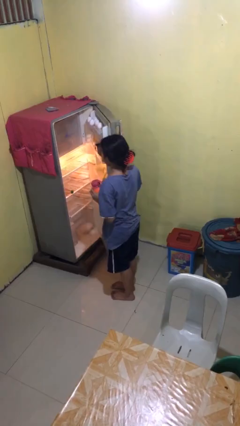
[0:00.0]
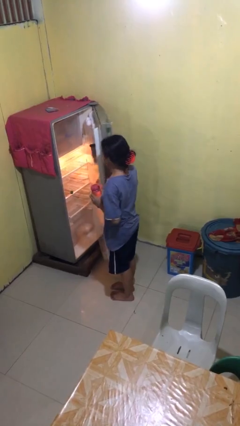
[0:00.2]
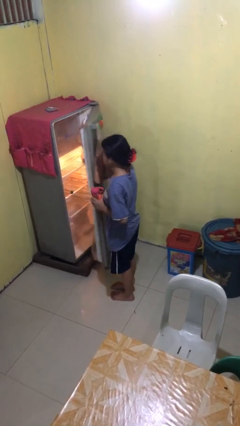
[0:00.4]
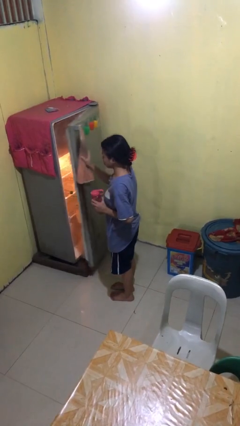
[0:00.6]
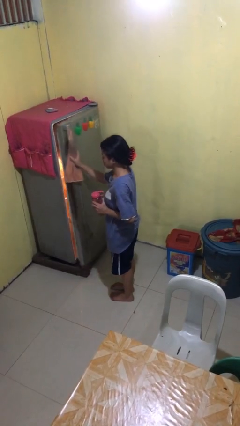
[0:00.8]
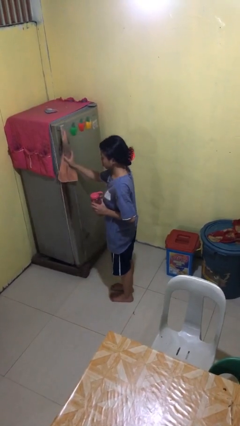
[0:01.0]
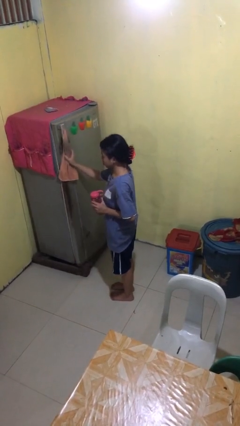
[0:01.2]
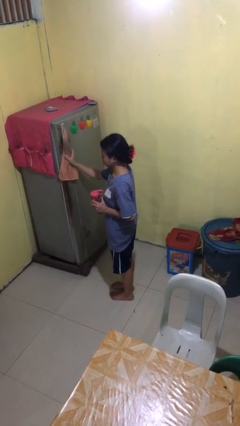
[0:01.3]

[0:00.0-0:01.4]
person closes refrigerator

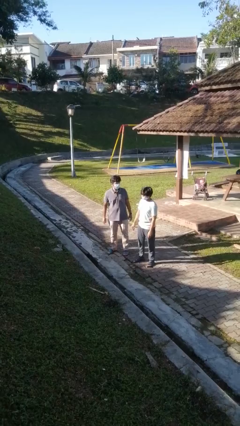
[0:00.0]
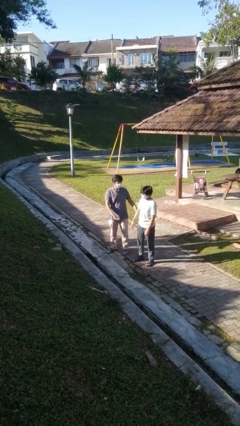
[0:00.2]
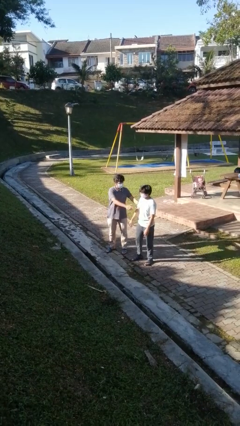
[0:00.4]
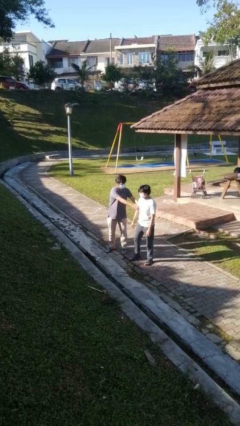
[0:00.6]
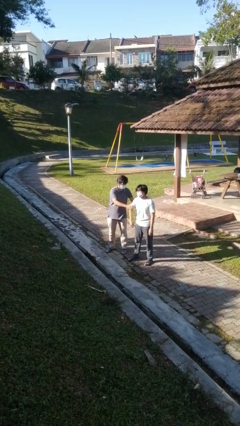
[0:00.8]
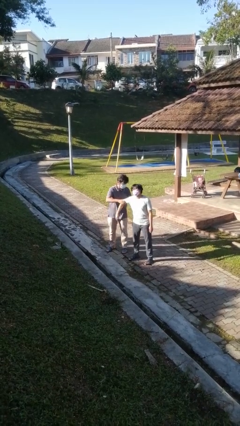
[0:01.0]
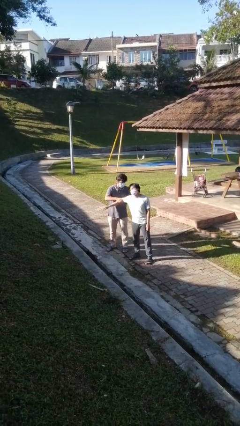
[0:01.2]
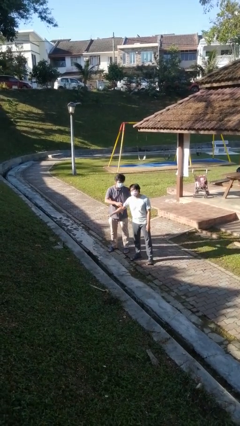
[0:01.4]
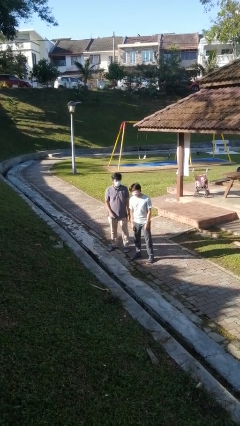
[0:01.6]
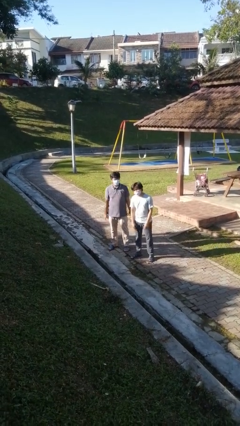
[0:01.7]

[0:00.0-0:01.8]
person grabs person by bicep

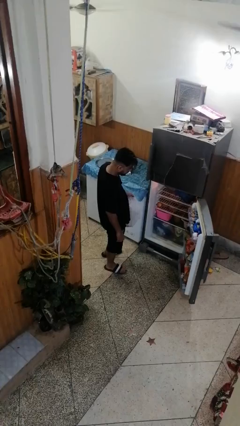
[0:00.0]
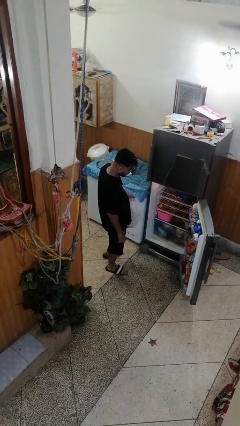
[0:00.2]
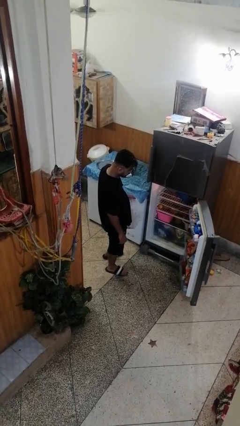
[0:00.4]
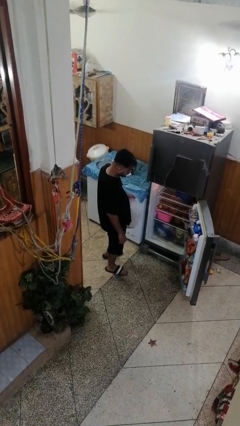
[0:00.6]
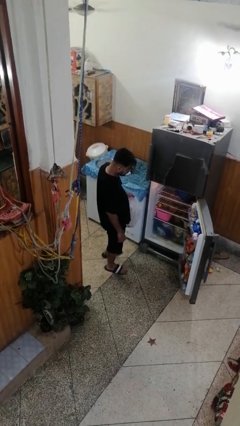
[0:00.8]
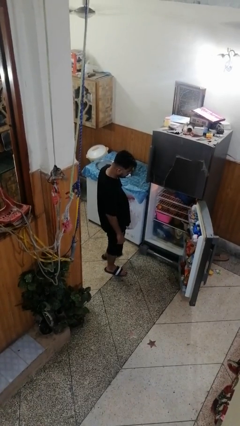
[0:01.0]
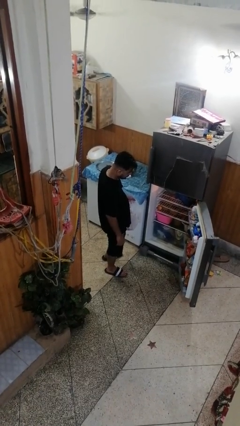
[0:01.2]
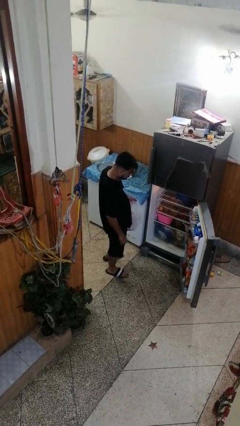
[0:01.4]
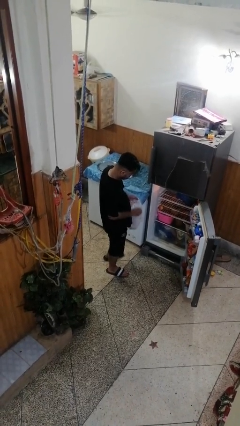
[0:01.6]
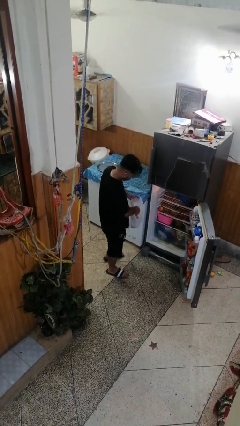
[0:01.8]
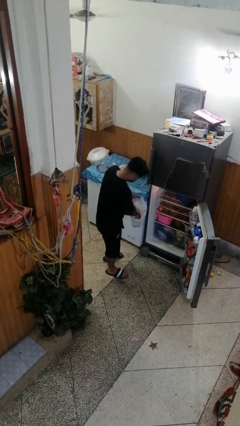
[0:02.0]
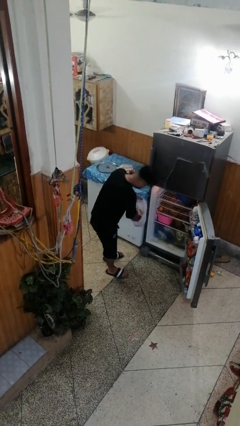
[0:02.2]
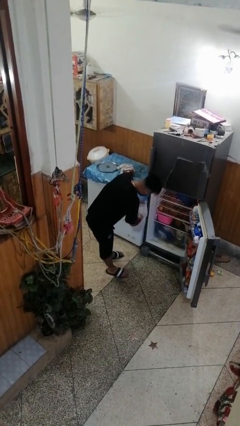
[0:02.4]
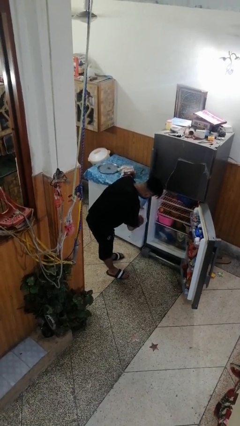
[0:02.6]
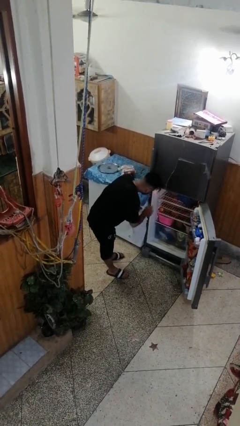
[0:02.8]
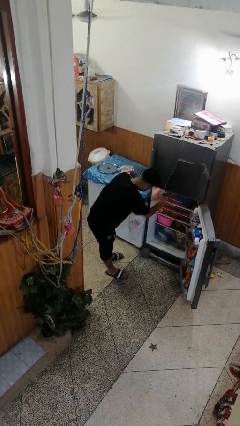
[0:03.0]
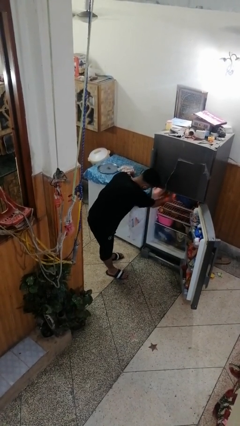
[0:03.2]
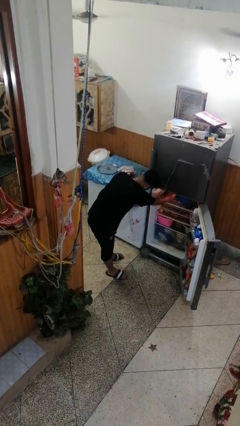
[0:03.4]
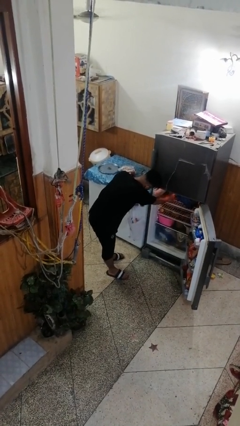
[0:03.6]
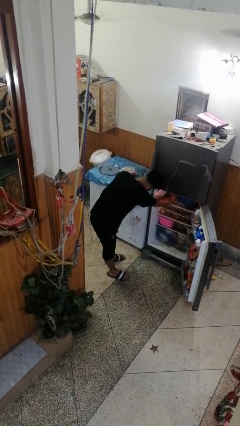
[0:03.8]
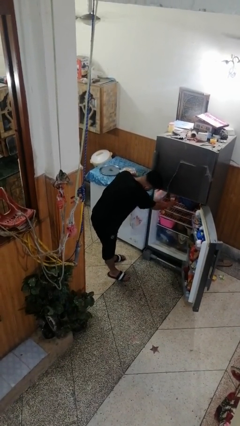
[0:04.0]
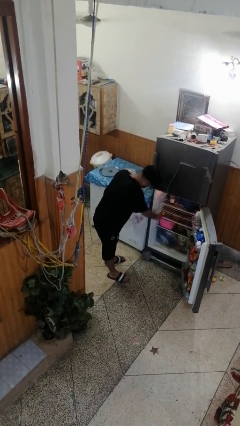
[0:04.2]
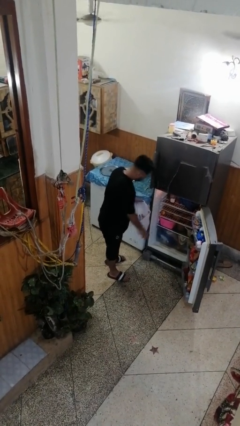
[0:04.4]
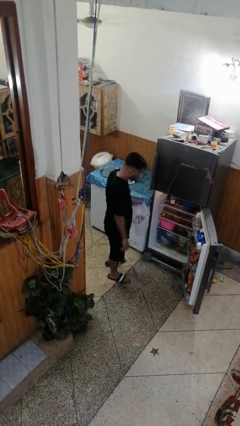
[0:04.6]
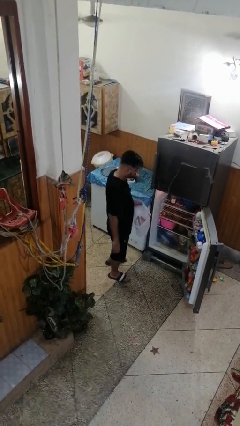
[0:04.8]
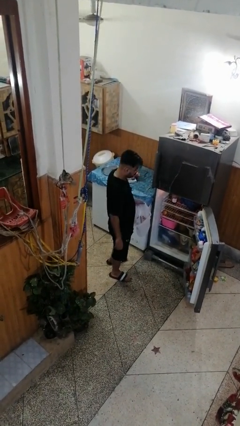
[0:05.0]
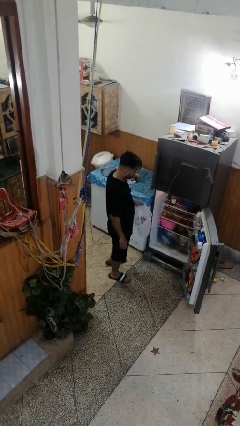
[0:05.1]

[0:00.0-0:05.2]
person loads groceries into refrigerator

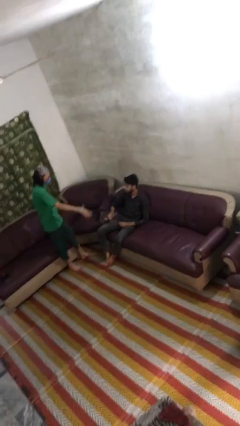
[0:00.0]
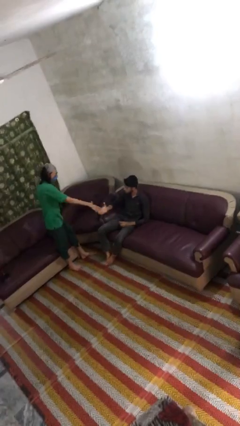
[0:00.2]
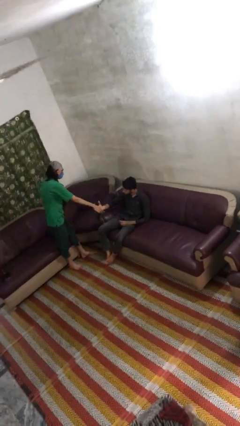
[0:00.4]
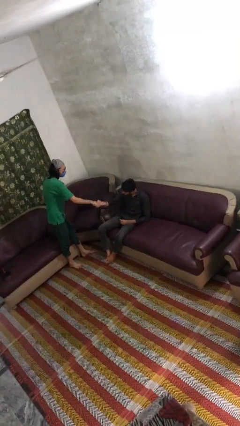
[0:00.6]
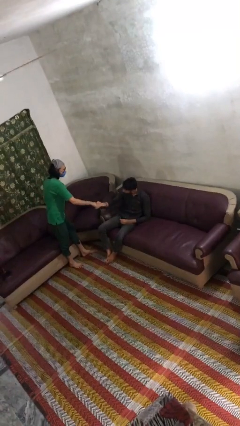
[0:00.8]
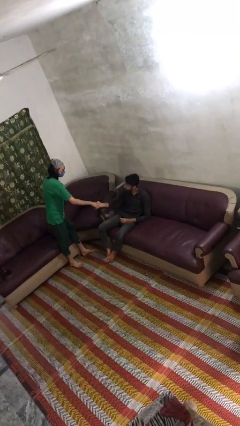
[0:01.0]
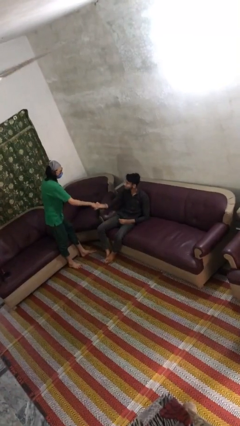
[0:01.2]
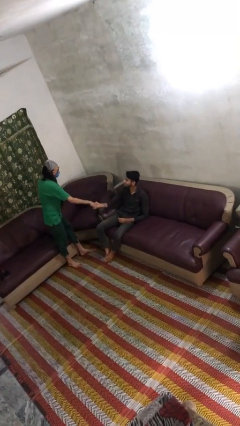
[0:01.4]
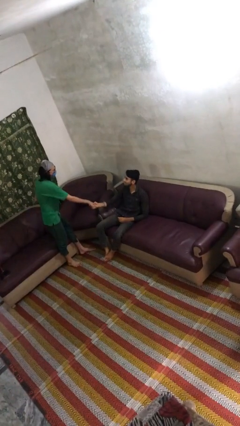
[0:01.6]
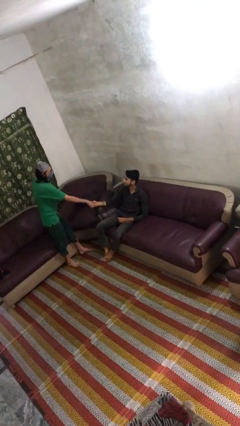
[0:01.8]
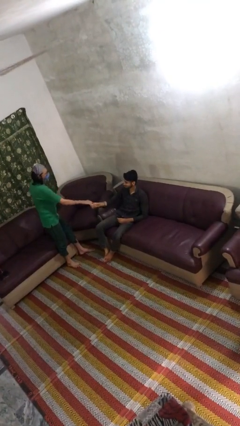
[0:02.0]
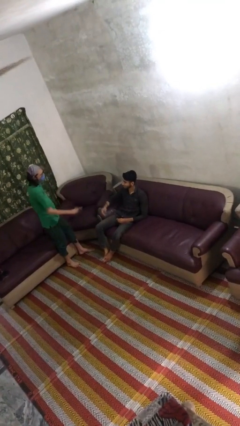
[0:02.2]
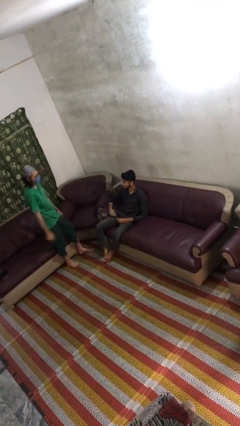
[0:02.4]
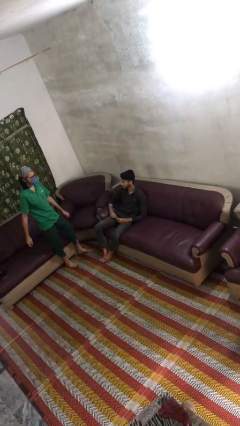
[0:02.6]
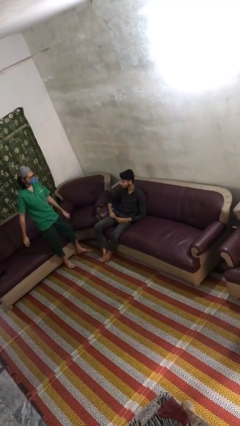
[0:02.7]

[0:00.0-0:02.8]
person shakes hand

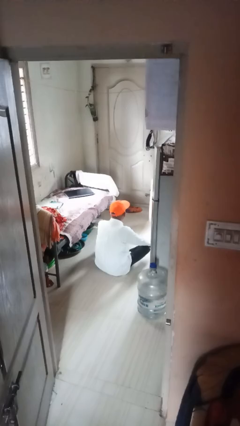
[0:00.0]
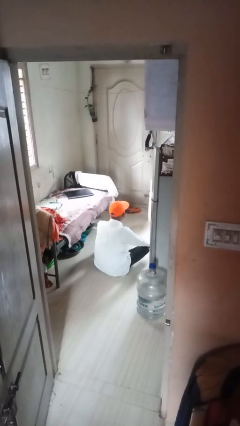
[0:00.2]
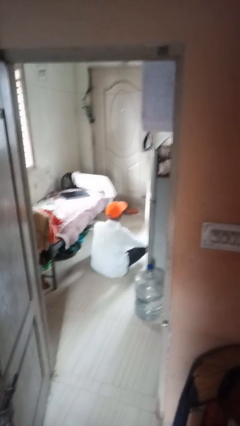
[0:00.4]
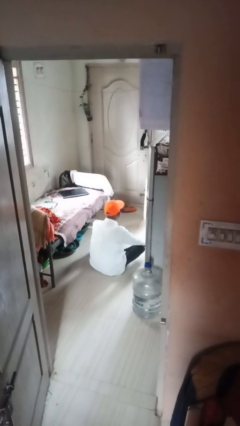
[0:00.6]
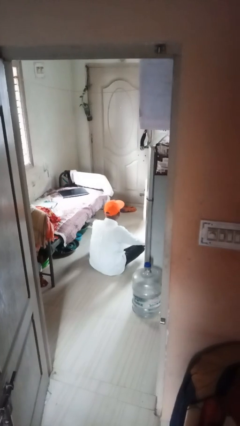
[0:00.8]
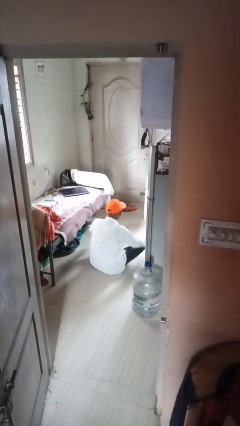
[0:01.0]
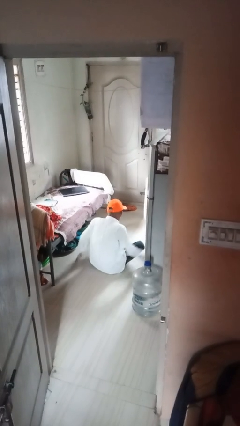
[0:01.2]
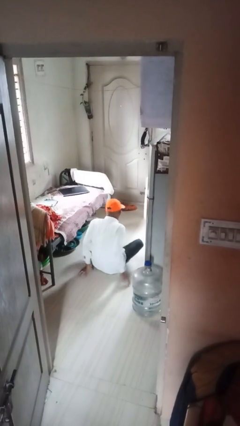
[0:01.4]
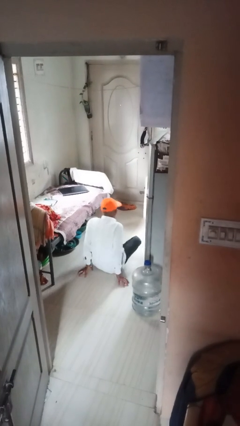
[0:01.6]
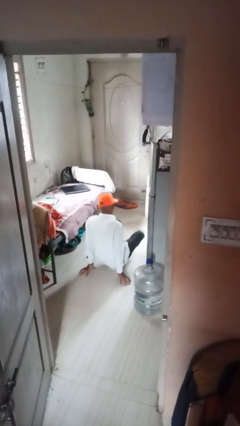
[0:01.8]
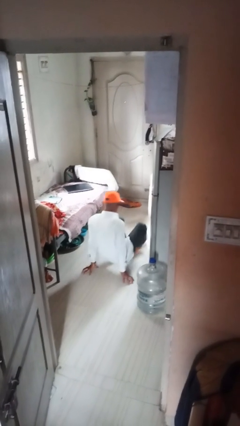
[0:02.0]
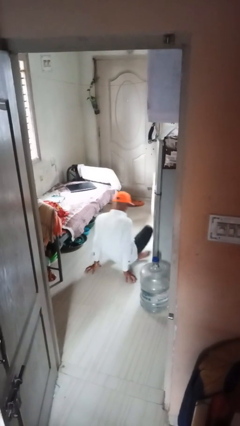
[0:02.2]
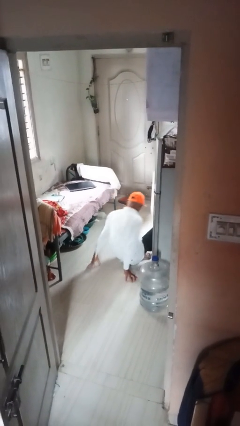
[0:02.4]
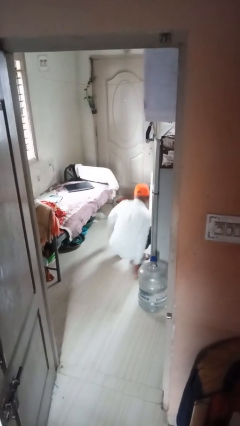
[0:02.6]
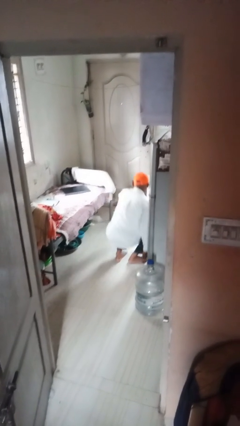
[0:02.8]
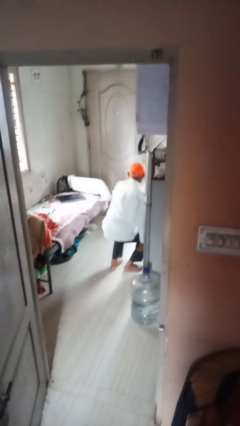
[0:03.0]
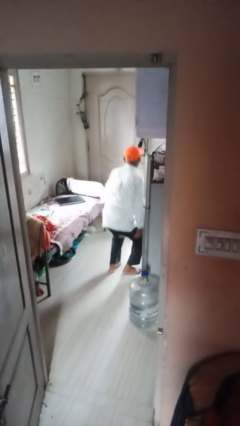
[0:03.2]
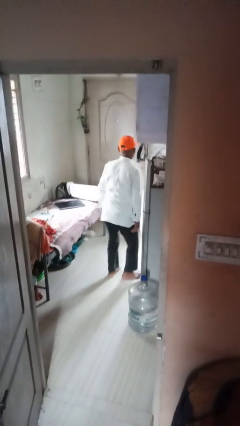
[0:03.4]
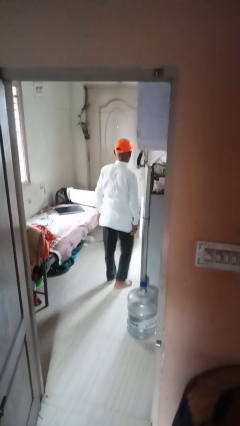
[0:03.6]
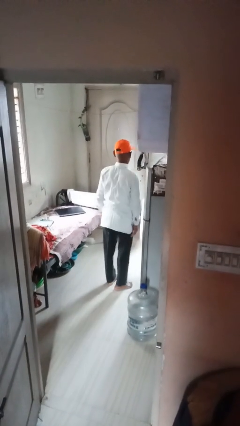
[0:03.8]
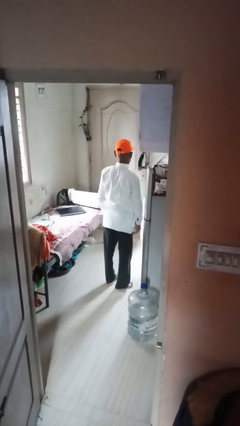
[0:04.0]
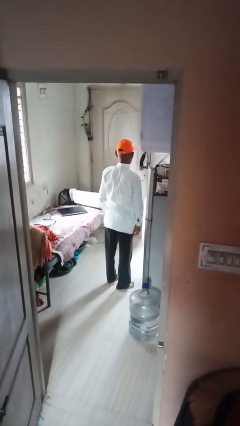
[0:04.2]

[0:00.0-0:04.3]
person stands up from floor

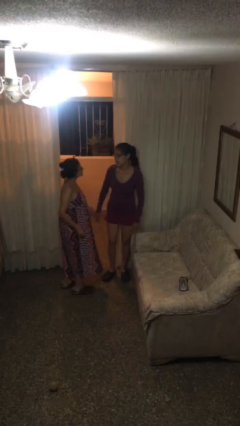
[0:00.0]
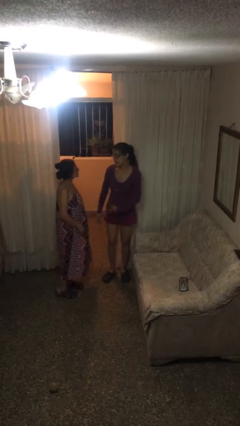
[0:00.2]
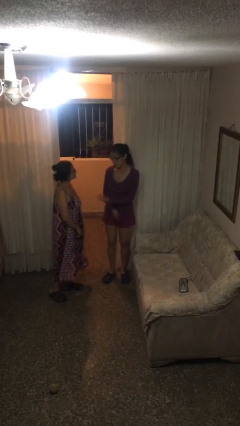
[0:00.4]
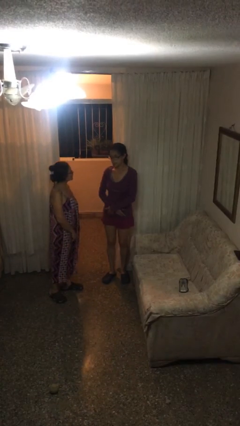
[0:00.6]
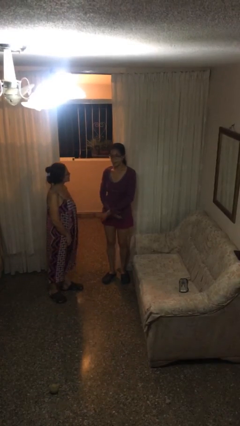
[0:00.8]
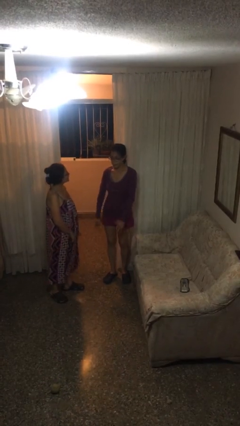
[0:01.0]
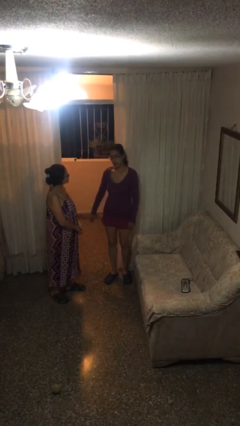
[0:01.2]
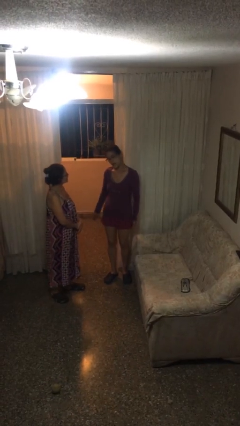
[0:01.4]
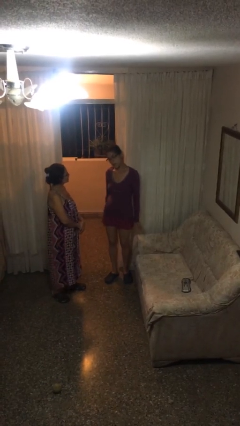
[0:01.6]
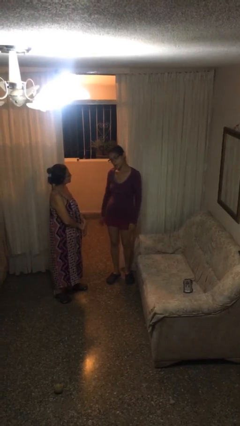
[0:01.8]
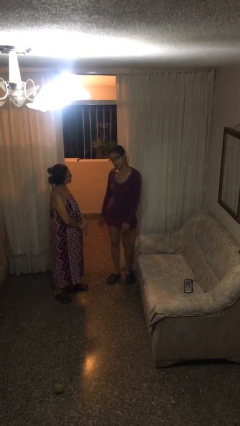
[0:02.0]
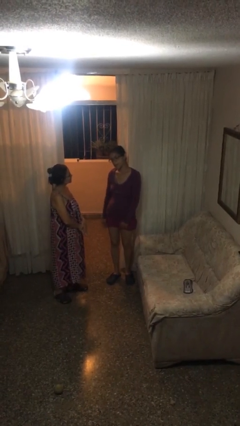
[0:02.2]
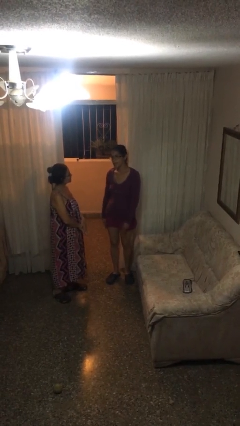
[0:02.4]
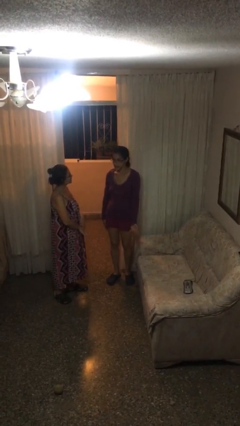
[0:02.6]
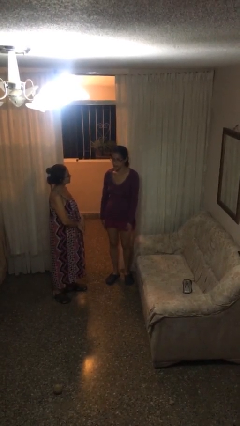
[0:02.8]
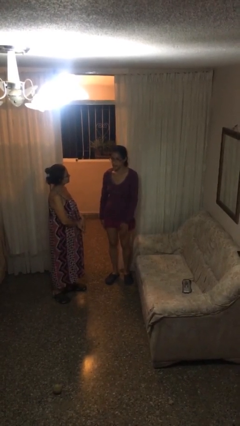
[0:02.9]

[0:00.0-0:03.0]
person talks to person
